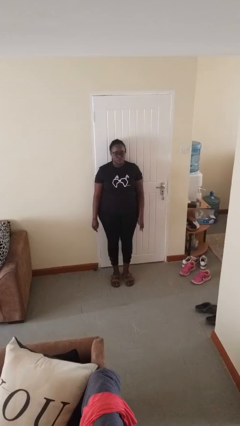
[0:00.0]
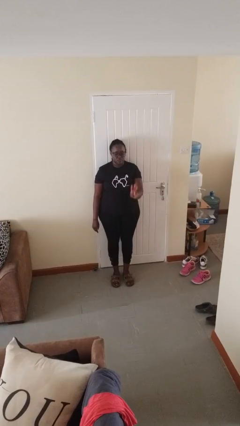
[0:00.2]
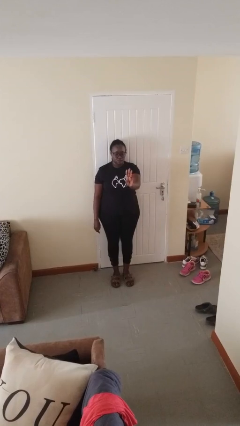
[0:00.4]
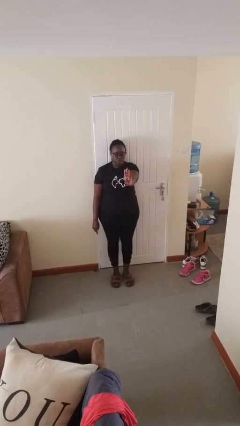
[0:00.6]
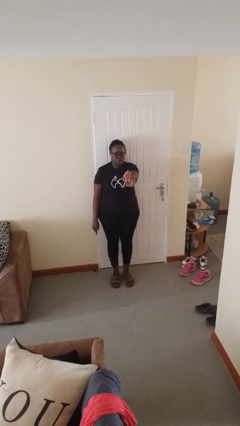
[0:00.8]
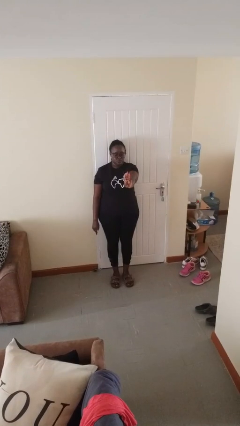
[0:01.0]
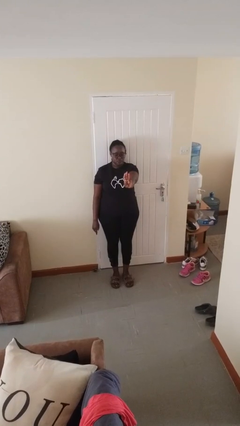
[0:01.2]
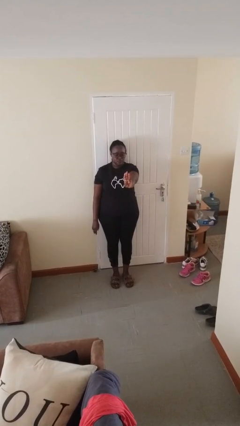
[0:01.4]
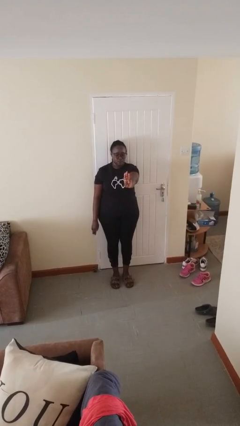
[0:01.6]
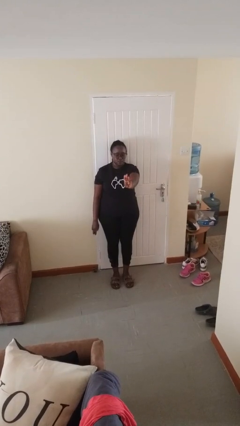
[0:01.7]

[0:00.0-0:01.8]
person gestures number three

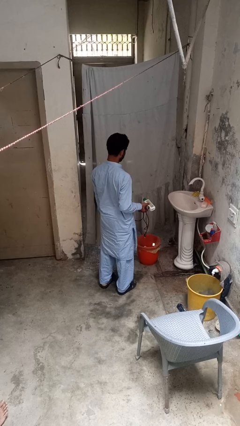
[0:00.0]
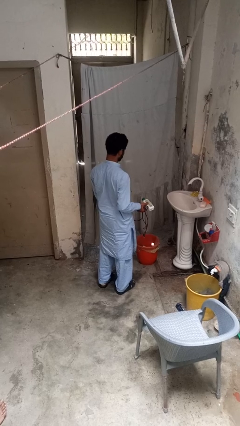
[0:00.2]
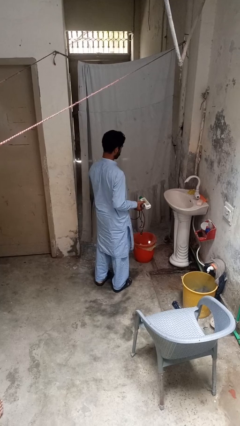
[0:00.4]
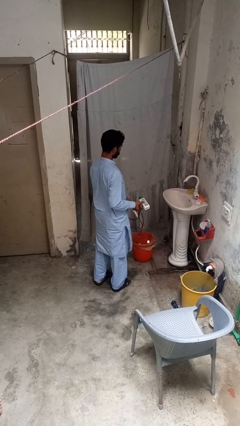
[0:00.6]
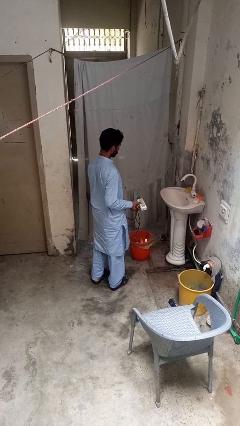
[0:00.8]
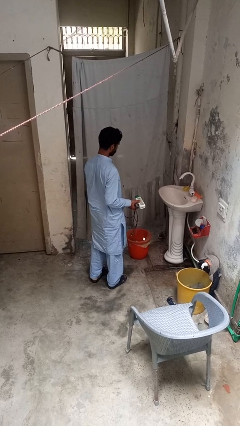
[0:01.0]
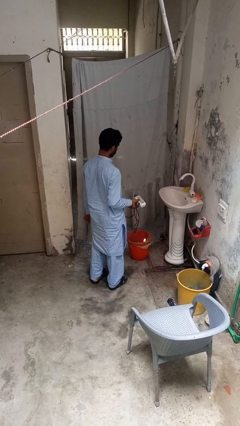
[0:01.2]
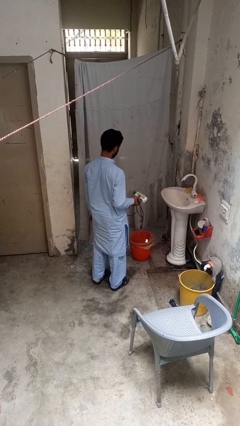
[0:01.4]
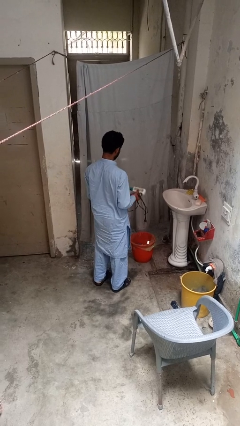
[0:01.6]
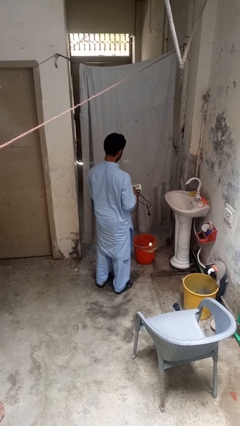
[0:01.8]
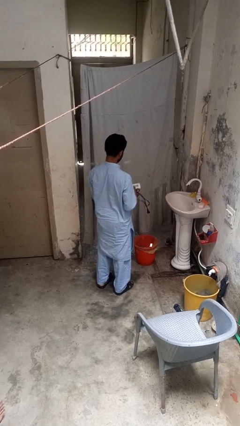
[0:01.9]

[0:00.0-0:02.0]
person discards trash

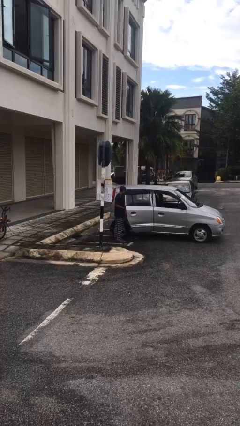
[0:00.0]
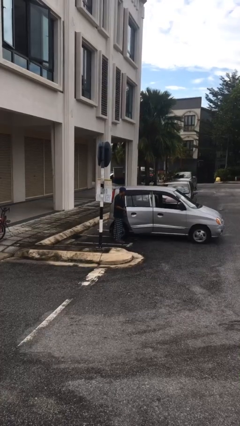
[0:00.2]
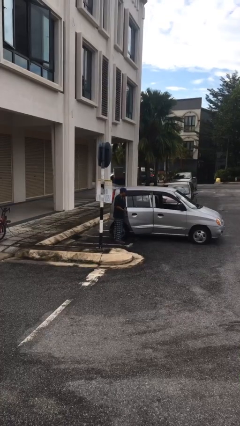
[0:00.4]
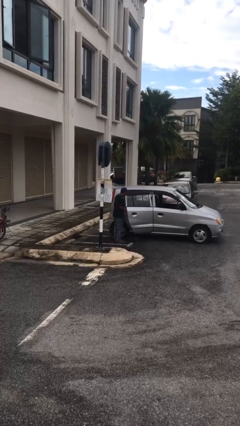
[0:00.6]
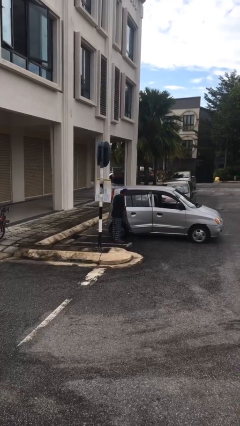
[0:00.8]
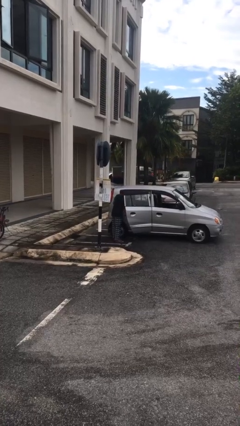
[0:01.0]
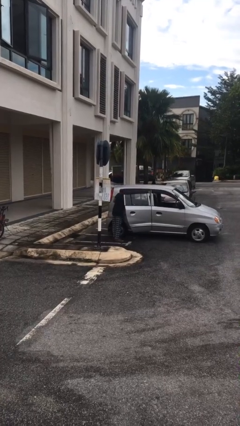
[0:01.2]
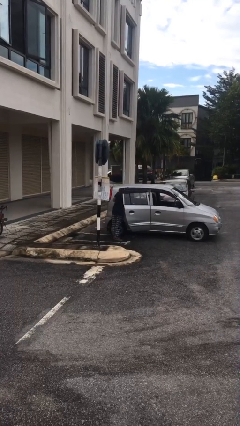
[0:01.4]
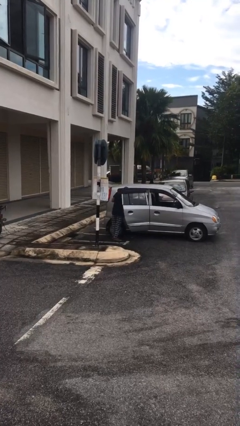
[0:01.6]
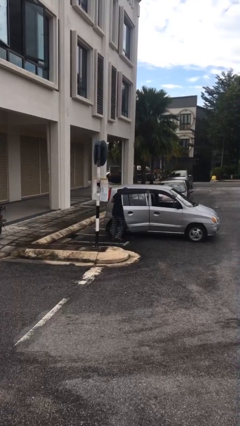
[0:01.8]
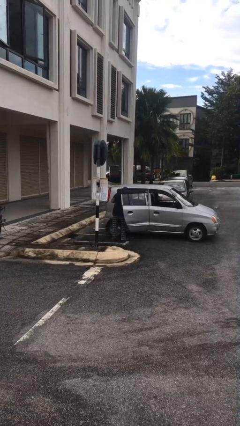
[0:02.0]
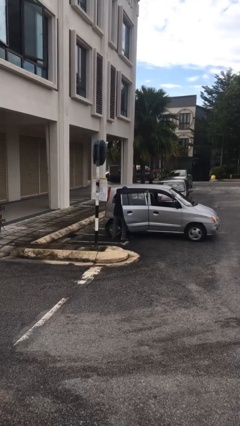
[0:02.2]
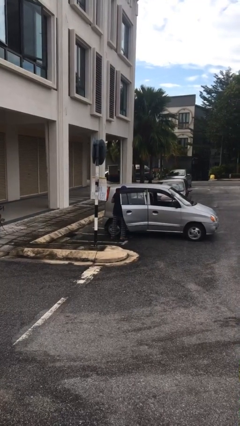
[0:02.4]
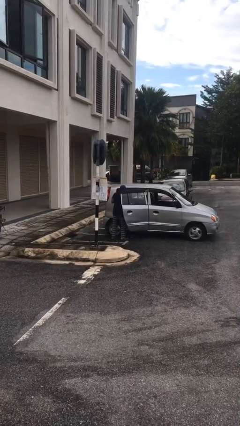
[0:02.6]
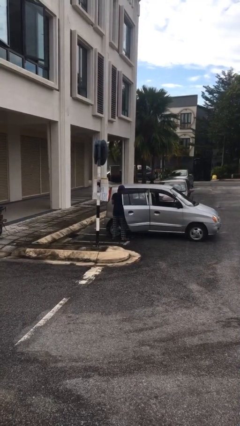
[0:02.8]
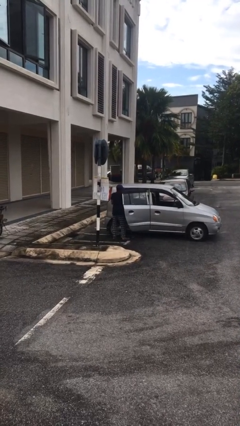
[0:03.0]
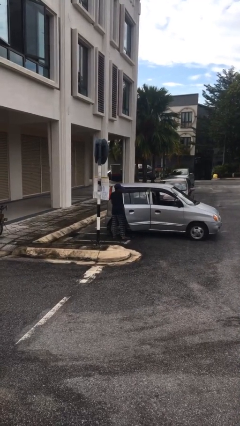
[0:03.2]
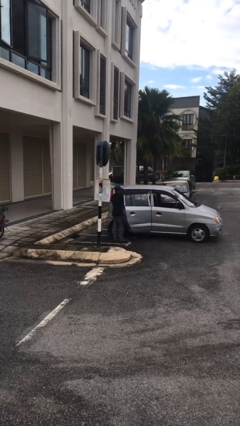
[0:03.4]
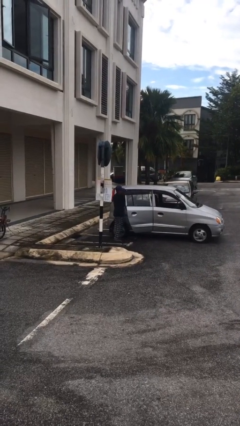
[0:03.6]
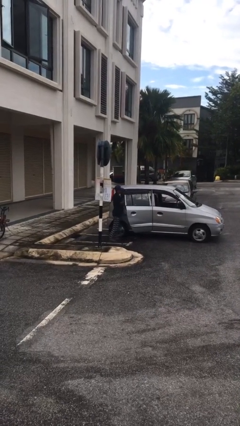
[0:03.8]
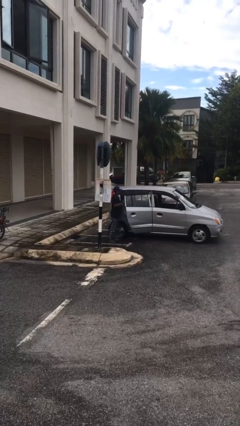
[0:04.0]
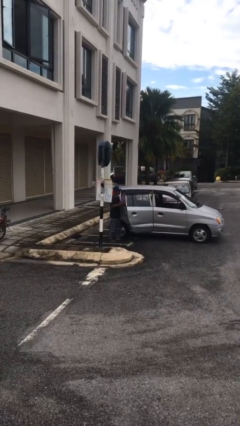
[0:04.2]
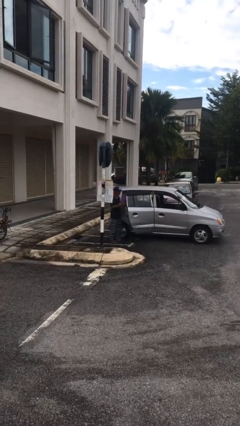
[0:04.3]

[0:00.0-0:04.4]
person unloads car

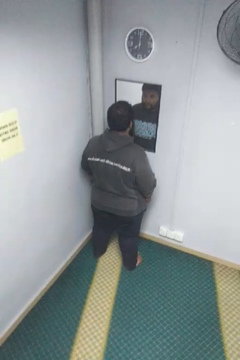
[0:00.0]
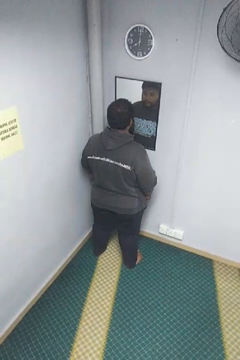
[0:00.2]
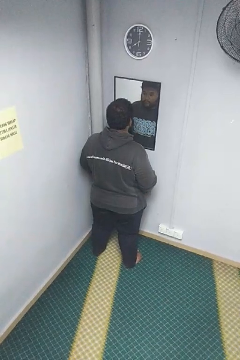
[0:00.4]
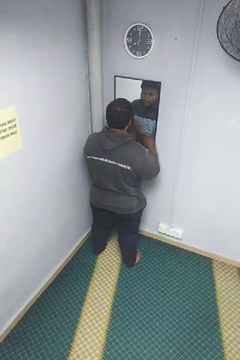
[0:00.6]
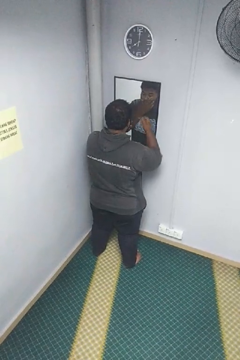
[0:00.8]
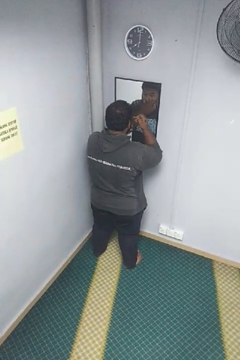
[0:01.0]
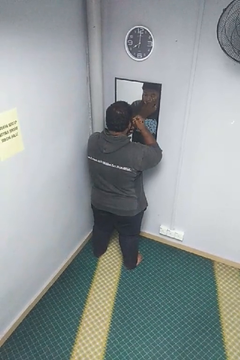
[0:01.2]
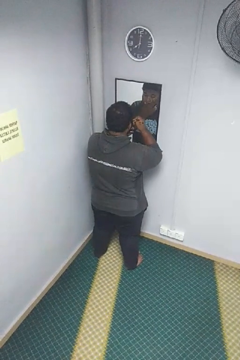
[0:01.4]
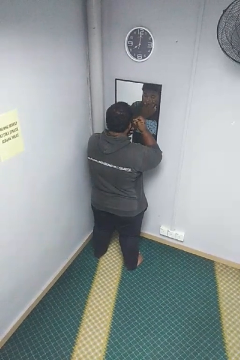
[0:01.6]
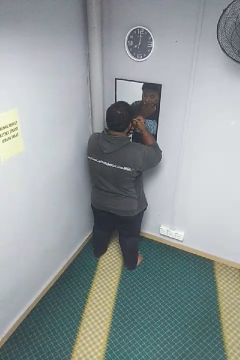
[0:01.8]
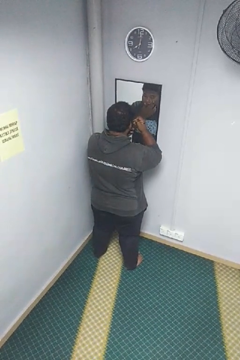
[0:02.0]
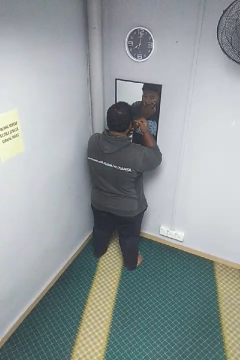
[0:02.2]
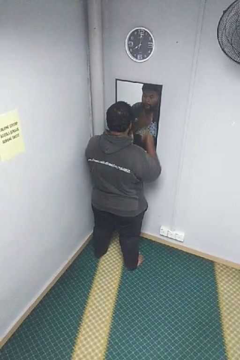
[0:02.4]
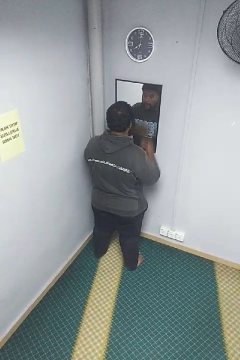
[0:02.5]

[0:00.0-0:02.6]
person applies eye makeup

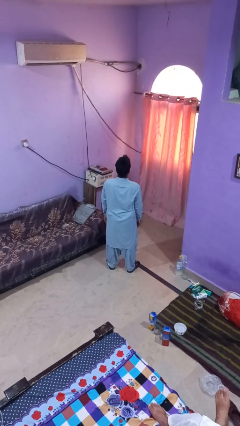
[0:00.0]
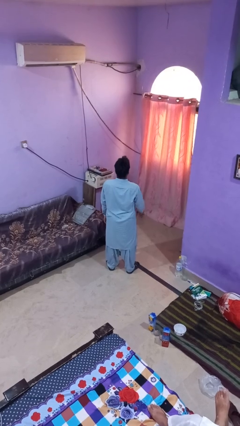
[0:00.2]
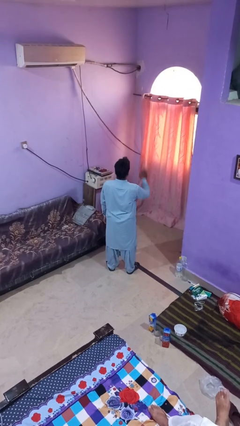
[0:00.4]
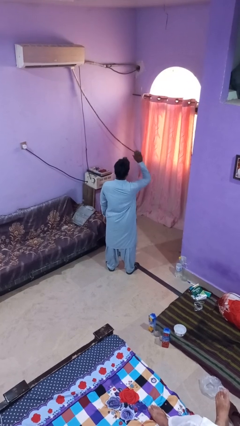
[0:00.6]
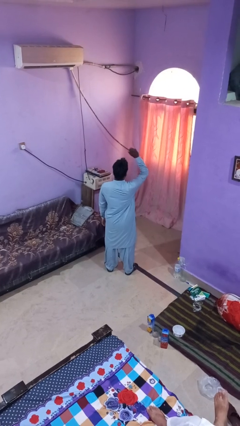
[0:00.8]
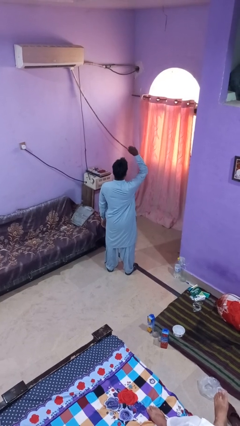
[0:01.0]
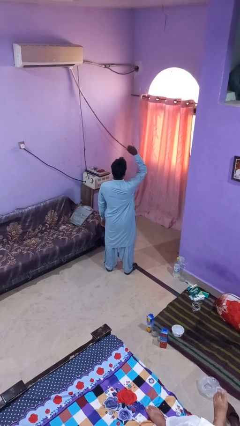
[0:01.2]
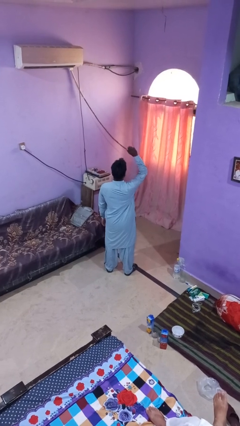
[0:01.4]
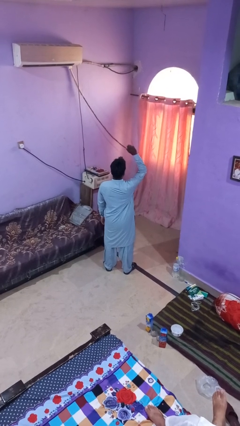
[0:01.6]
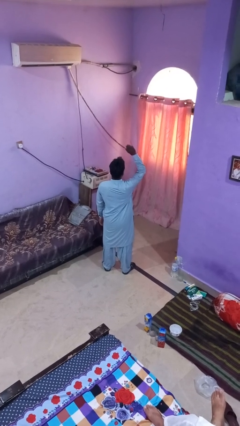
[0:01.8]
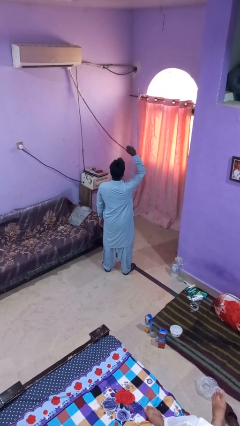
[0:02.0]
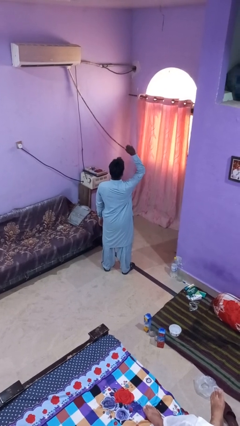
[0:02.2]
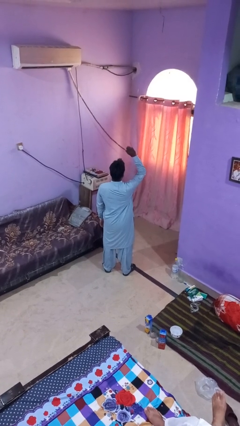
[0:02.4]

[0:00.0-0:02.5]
person gestures raise hand

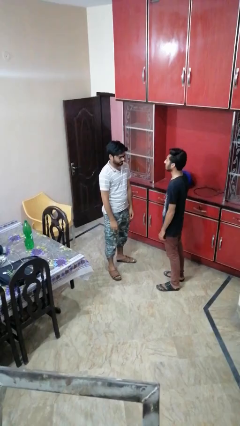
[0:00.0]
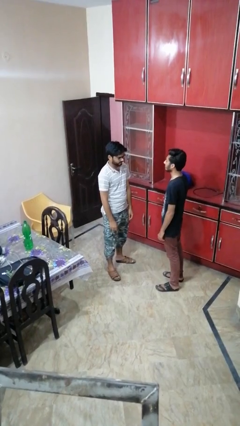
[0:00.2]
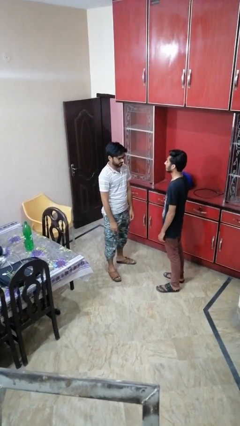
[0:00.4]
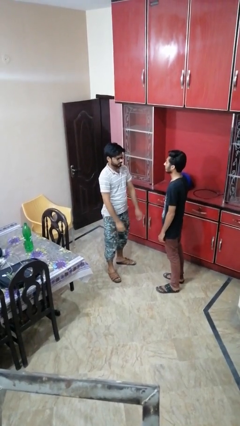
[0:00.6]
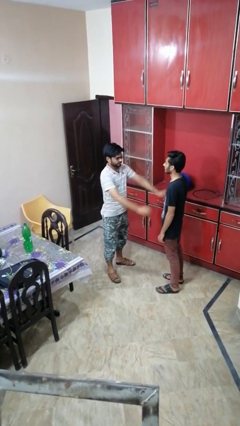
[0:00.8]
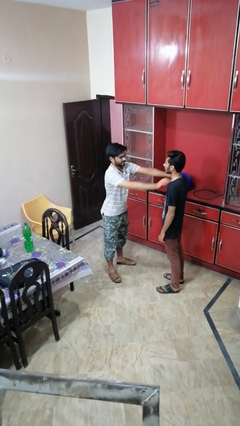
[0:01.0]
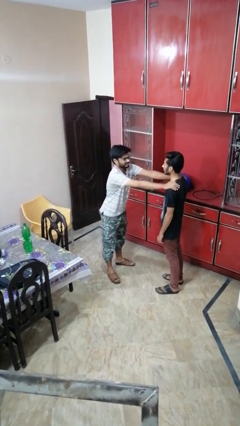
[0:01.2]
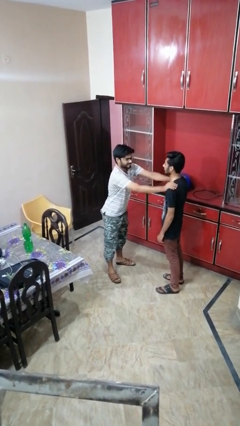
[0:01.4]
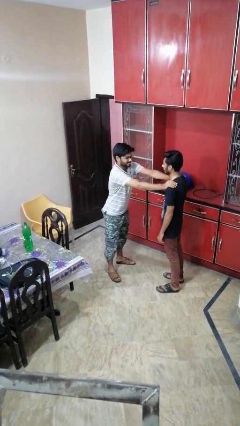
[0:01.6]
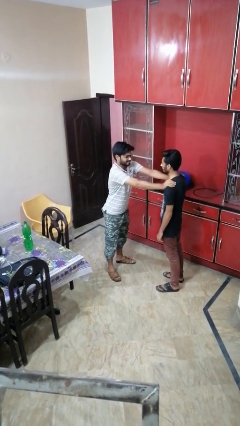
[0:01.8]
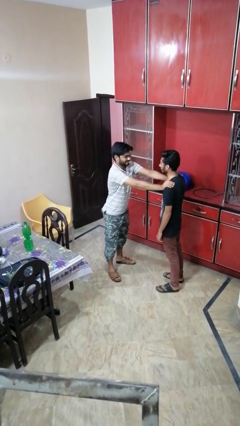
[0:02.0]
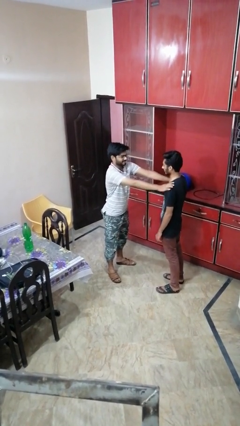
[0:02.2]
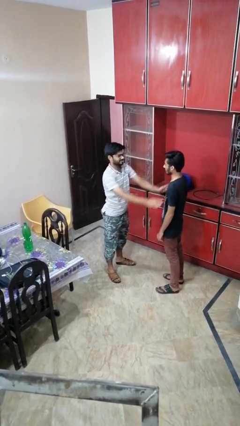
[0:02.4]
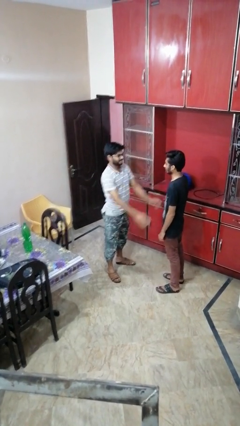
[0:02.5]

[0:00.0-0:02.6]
person pounds shoulders of person

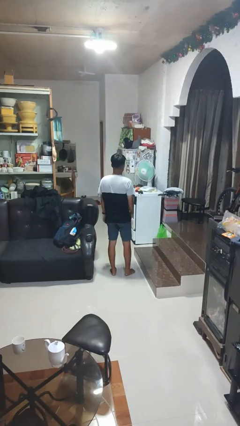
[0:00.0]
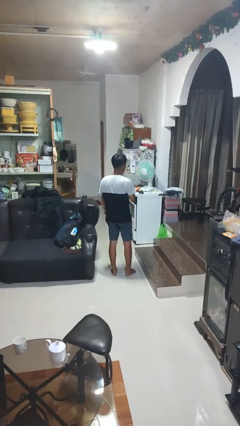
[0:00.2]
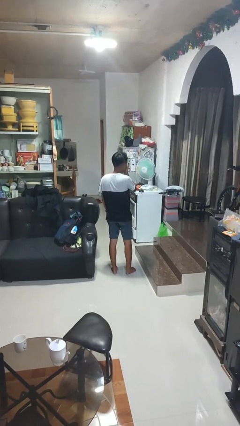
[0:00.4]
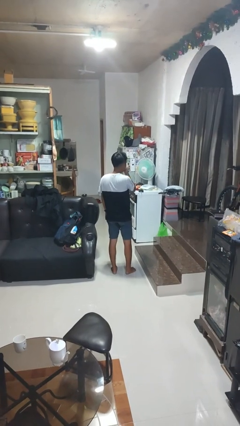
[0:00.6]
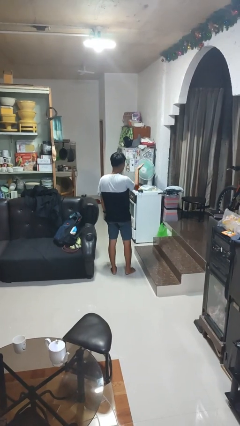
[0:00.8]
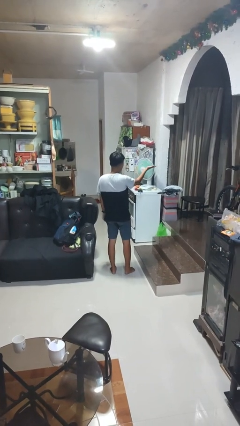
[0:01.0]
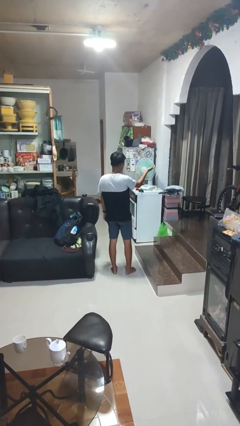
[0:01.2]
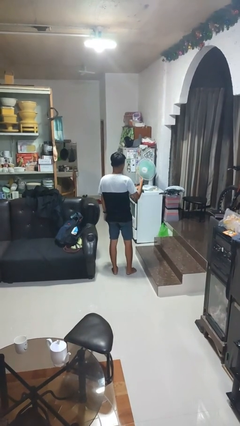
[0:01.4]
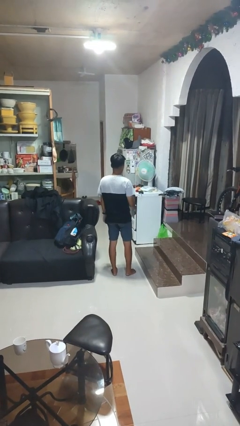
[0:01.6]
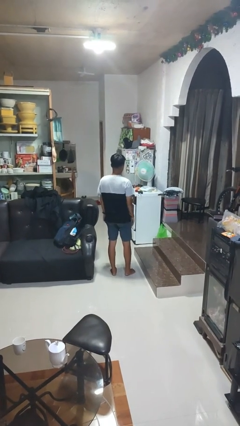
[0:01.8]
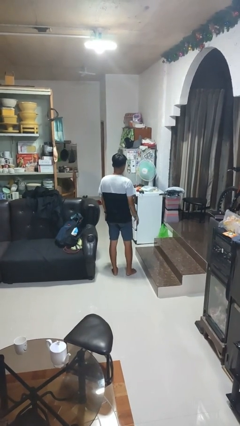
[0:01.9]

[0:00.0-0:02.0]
person gestures blow kiss
